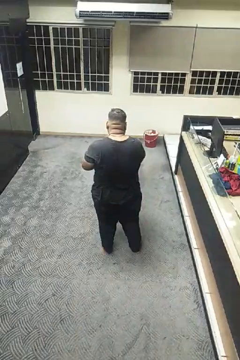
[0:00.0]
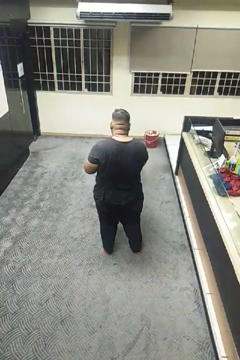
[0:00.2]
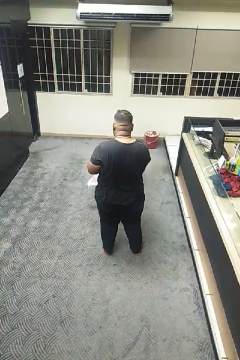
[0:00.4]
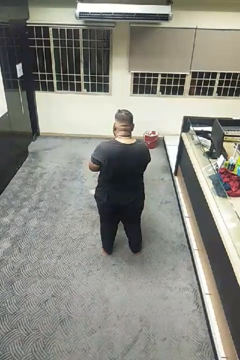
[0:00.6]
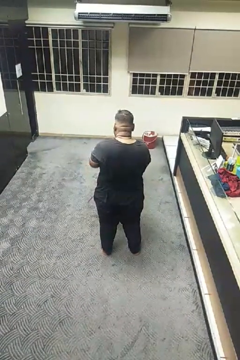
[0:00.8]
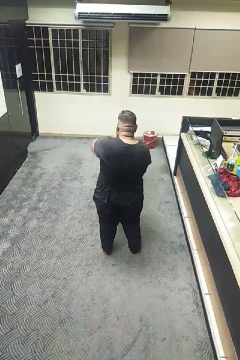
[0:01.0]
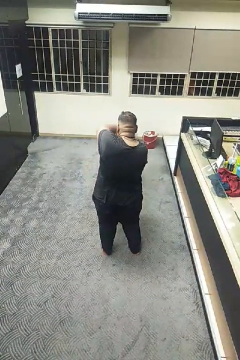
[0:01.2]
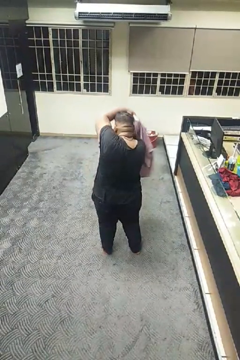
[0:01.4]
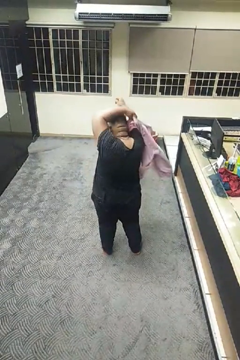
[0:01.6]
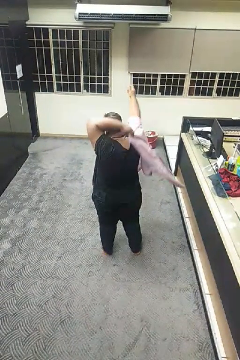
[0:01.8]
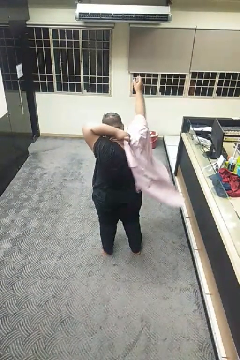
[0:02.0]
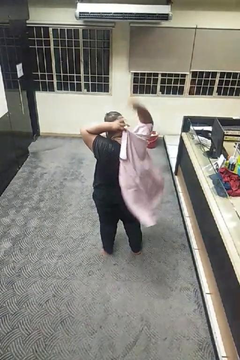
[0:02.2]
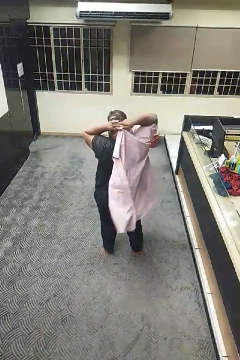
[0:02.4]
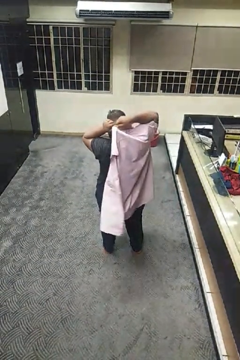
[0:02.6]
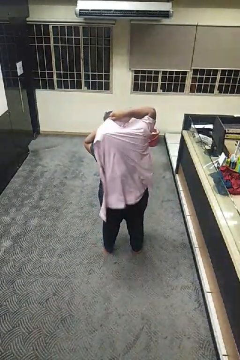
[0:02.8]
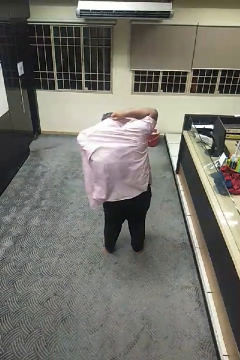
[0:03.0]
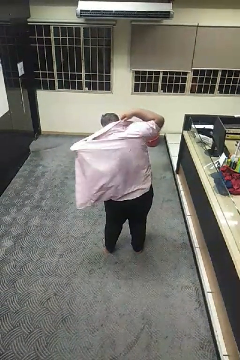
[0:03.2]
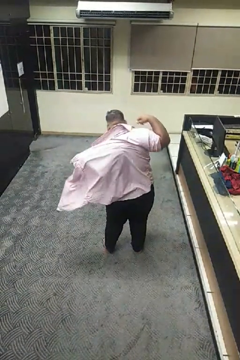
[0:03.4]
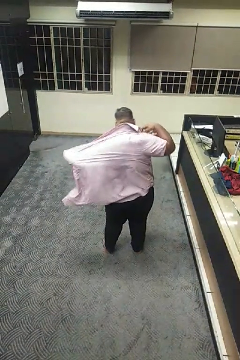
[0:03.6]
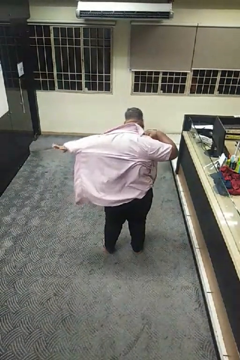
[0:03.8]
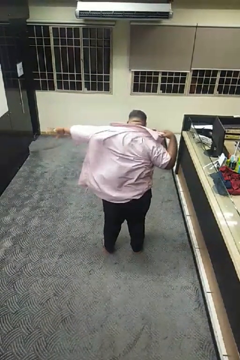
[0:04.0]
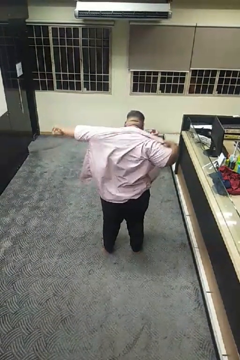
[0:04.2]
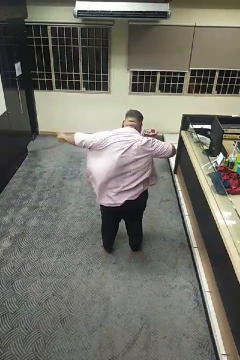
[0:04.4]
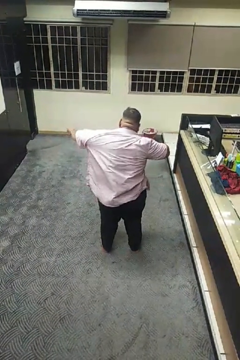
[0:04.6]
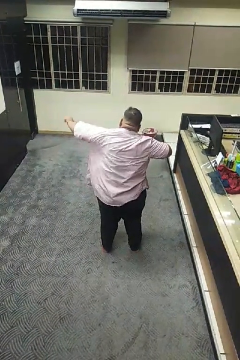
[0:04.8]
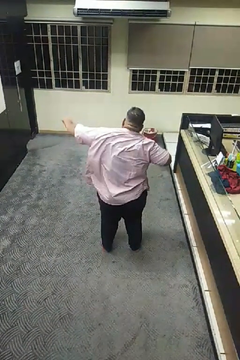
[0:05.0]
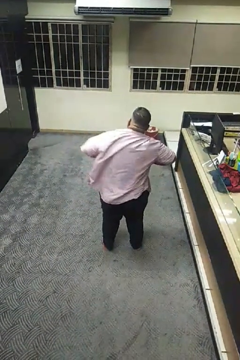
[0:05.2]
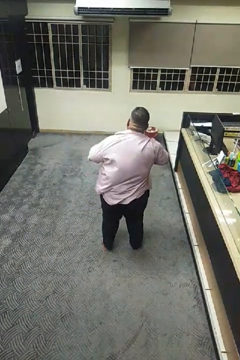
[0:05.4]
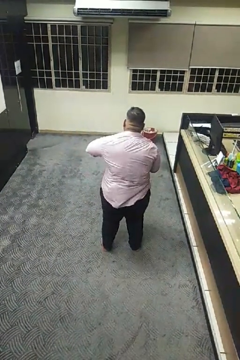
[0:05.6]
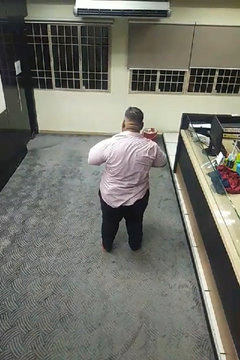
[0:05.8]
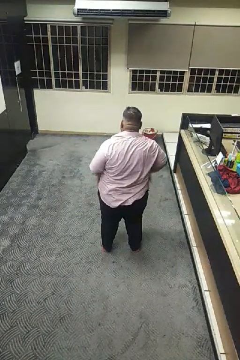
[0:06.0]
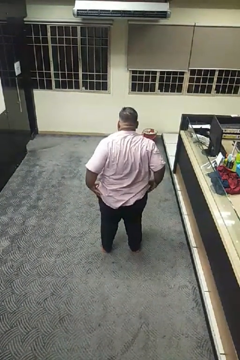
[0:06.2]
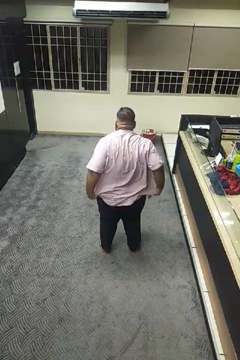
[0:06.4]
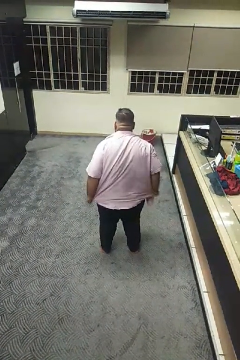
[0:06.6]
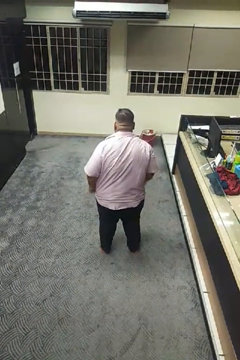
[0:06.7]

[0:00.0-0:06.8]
person puts on shirt

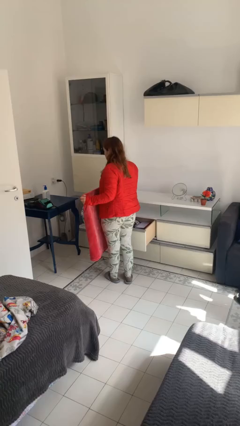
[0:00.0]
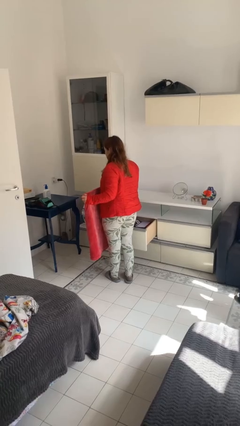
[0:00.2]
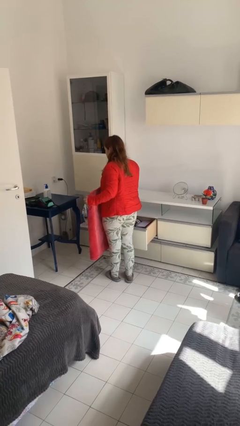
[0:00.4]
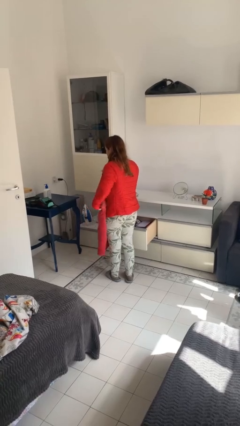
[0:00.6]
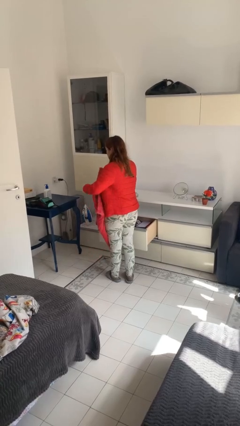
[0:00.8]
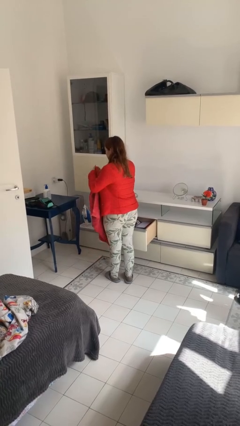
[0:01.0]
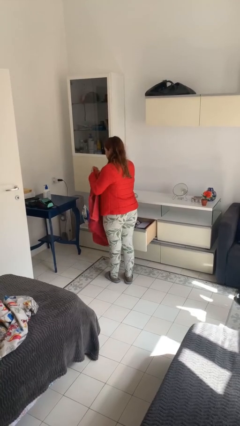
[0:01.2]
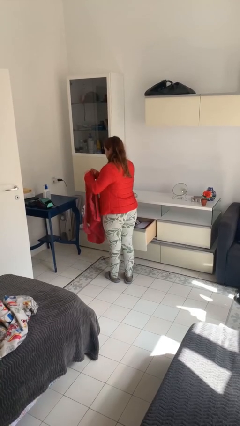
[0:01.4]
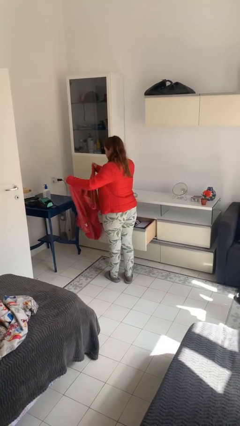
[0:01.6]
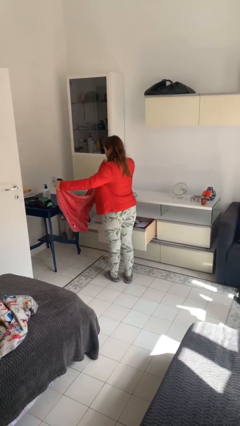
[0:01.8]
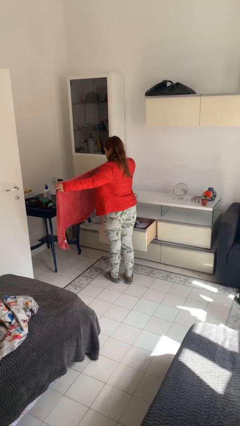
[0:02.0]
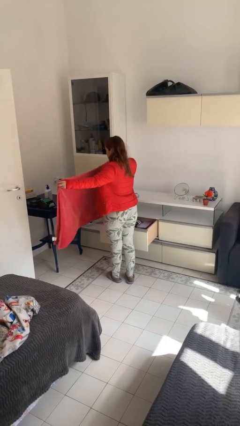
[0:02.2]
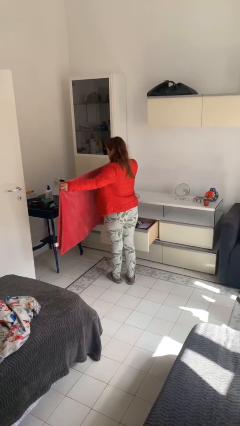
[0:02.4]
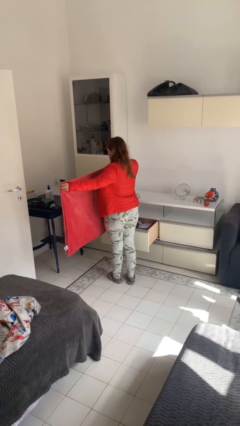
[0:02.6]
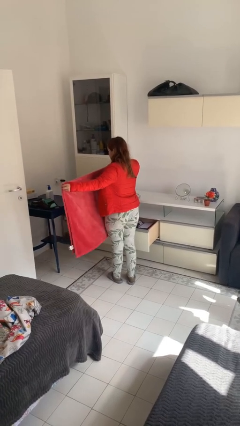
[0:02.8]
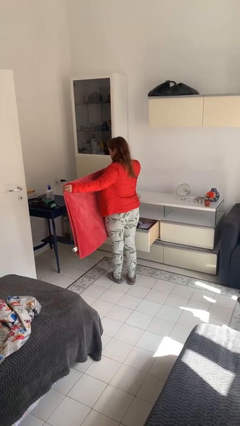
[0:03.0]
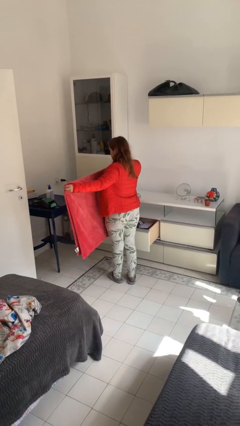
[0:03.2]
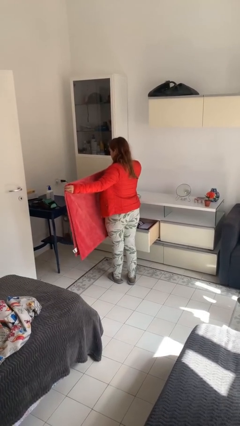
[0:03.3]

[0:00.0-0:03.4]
person folds blanket

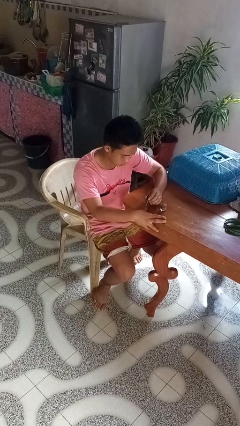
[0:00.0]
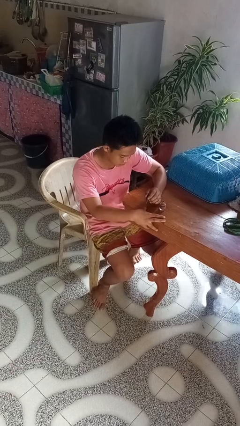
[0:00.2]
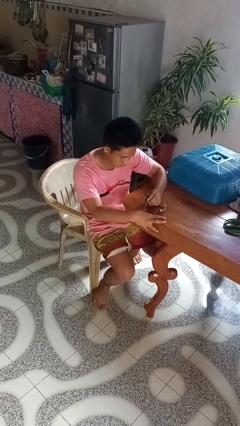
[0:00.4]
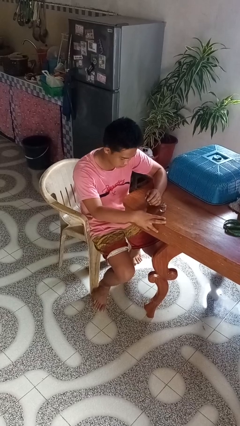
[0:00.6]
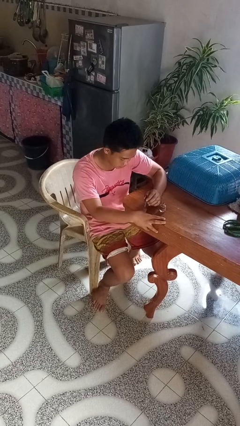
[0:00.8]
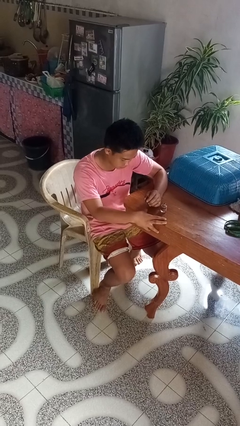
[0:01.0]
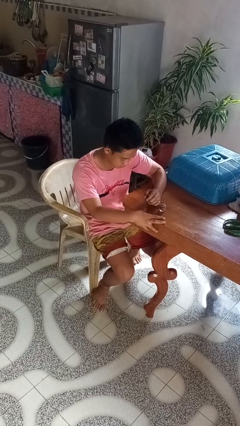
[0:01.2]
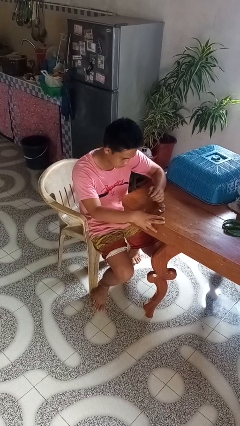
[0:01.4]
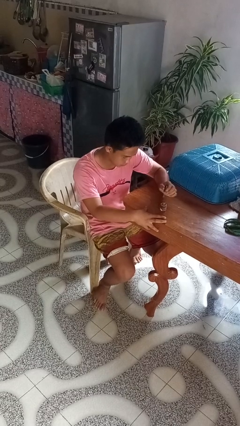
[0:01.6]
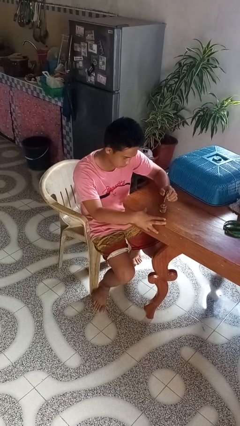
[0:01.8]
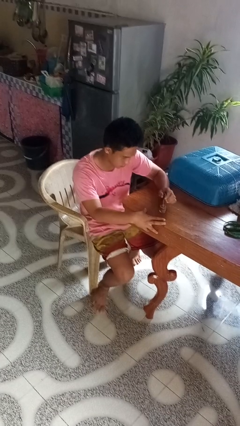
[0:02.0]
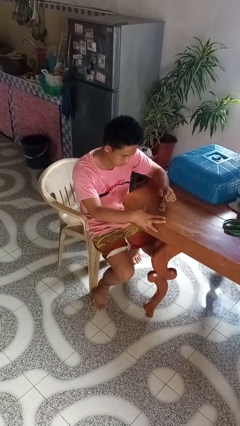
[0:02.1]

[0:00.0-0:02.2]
person paints fingernails

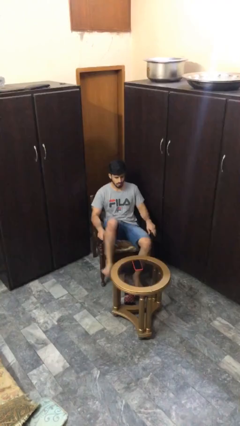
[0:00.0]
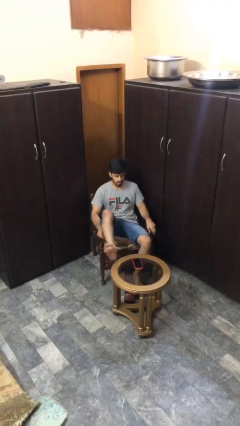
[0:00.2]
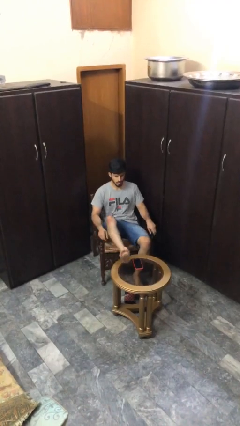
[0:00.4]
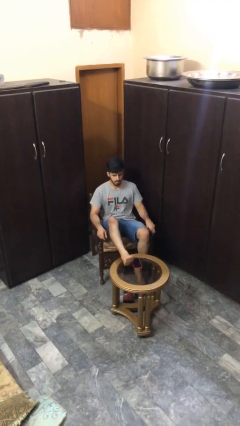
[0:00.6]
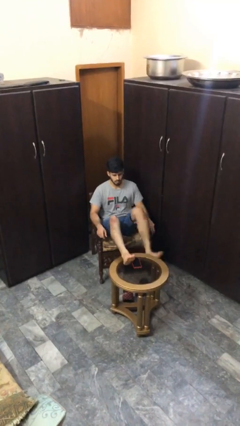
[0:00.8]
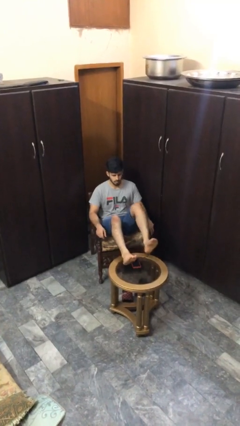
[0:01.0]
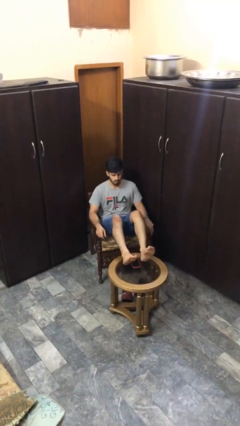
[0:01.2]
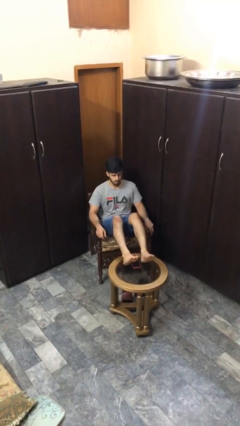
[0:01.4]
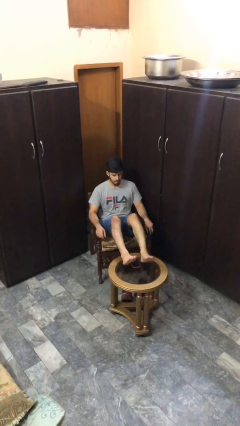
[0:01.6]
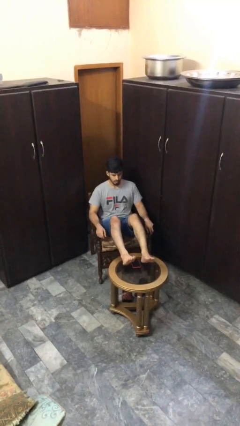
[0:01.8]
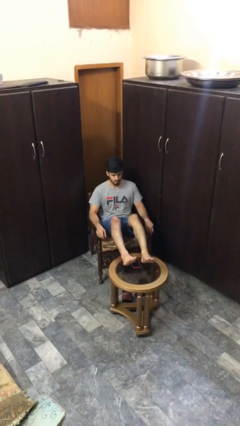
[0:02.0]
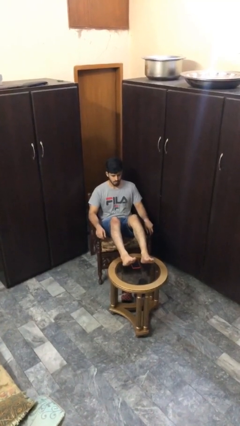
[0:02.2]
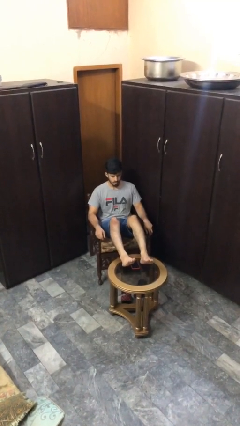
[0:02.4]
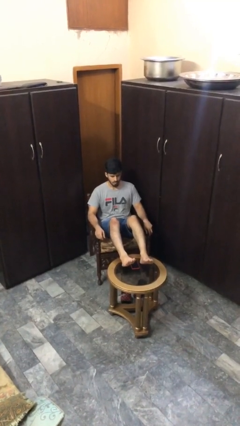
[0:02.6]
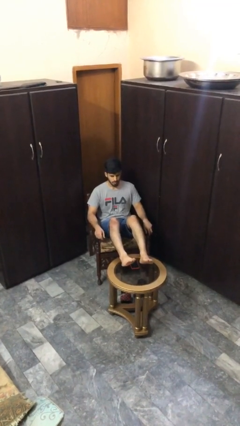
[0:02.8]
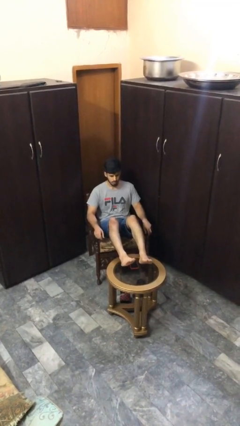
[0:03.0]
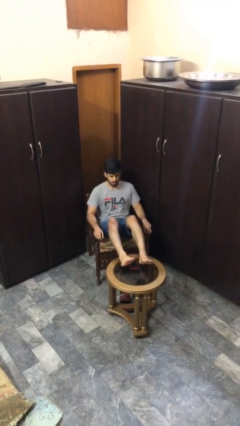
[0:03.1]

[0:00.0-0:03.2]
person puts feet up

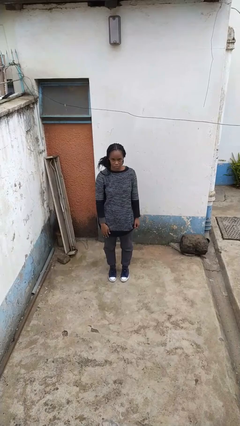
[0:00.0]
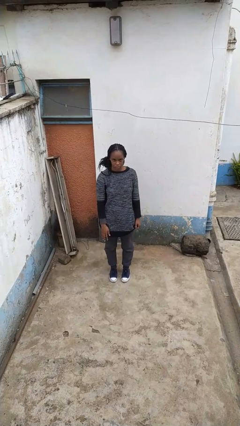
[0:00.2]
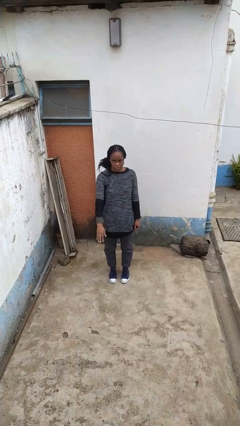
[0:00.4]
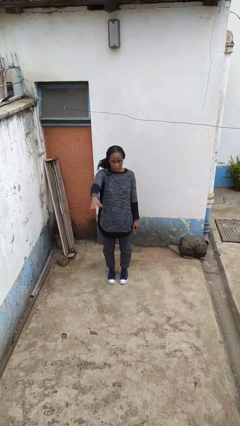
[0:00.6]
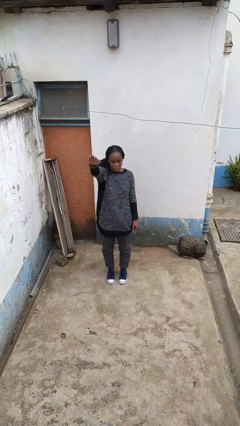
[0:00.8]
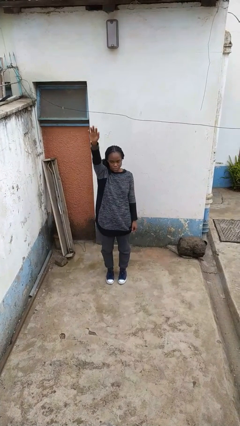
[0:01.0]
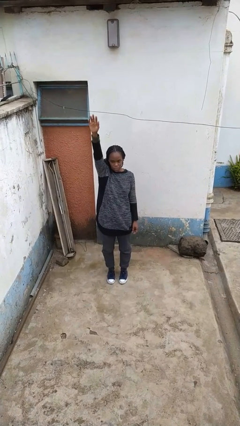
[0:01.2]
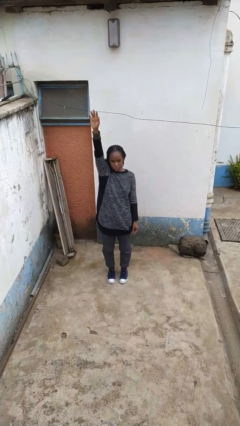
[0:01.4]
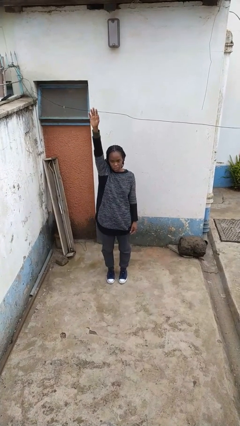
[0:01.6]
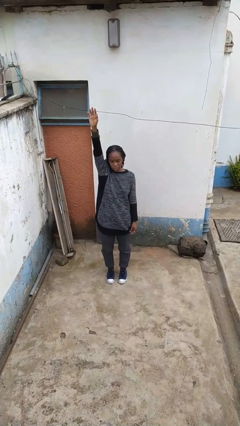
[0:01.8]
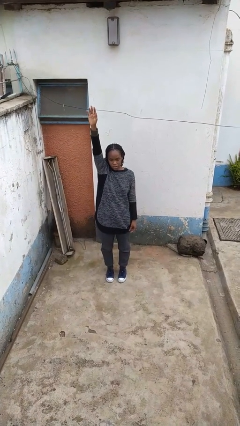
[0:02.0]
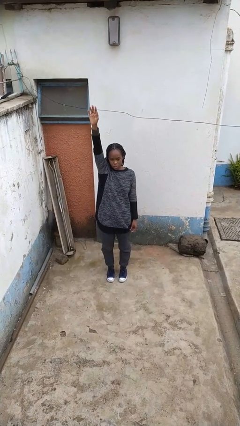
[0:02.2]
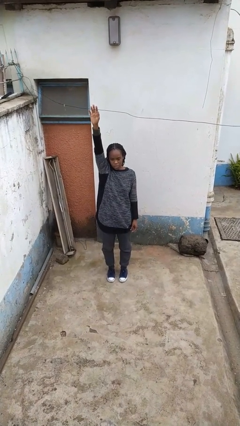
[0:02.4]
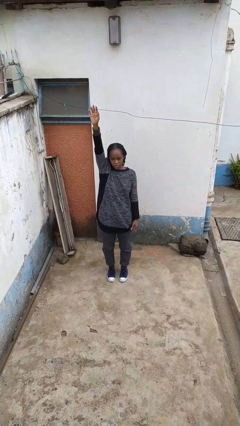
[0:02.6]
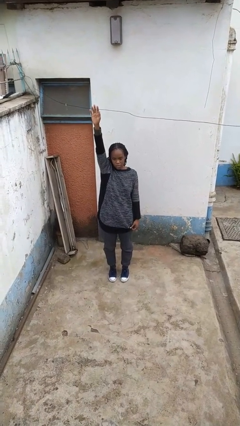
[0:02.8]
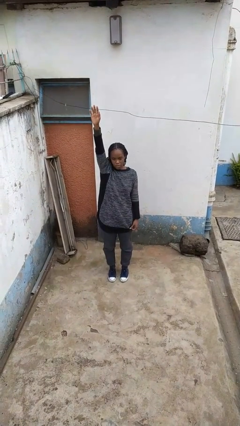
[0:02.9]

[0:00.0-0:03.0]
person gestures raise hand

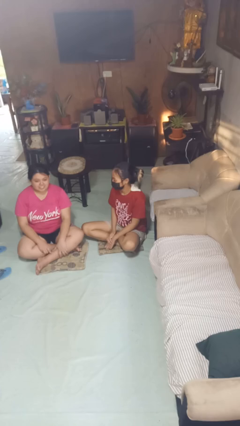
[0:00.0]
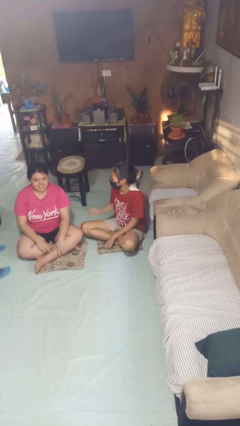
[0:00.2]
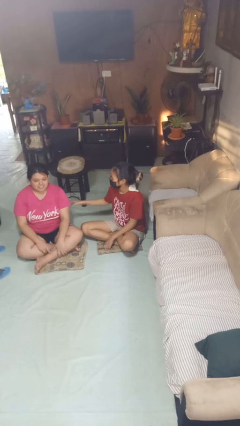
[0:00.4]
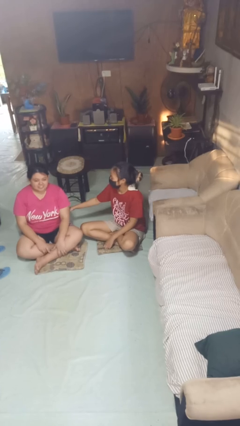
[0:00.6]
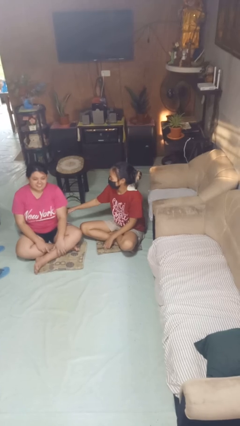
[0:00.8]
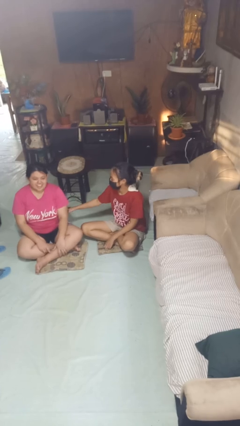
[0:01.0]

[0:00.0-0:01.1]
person tickles person
